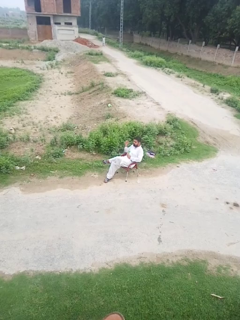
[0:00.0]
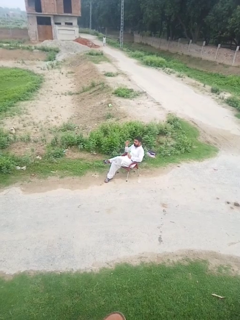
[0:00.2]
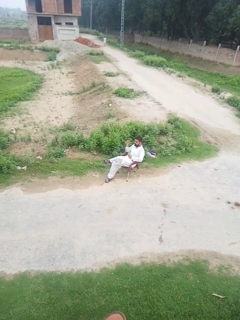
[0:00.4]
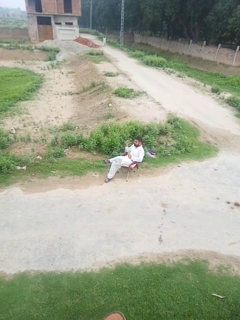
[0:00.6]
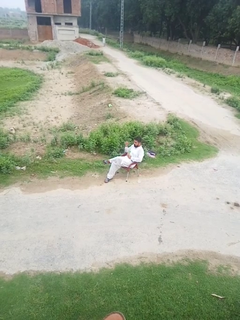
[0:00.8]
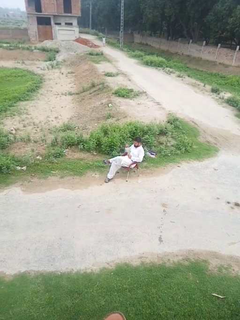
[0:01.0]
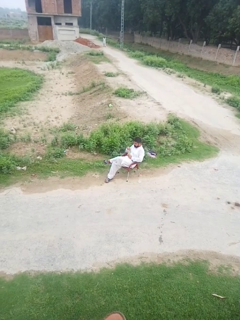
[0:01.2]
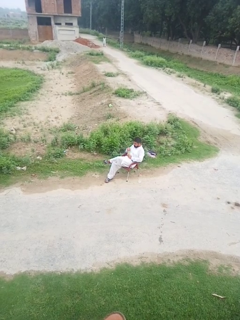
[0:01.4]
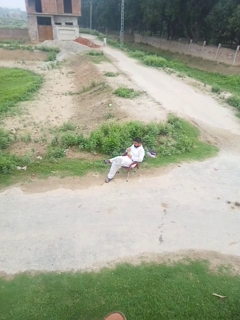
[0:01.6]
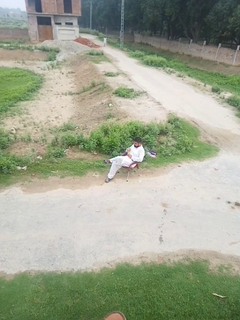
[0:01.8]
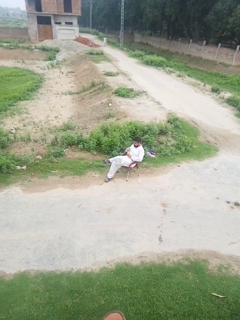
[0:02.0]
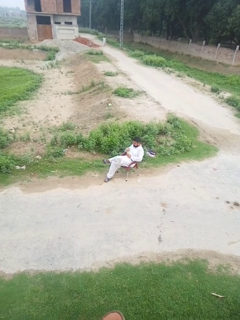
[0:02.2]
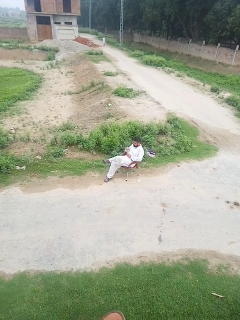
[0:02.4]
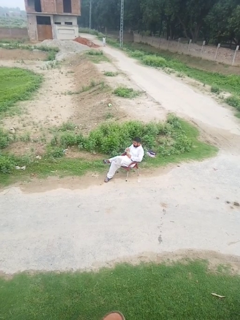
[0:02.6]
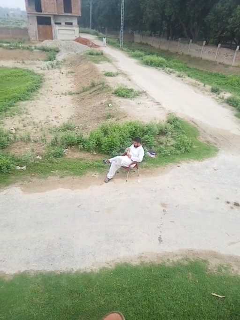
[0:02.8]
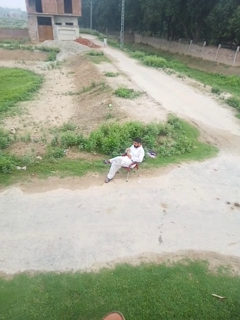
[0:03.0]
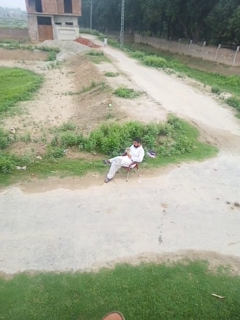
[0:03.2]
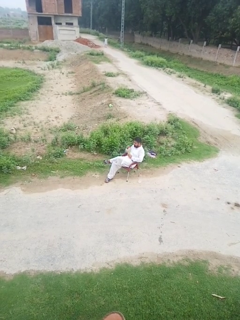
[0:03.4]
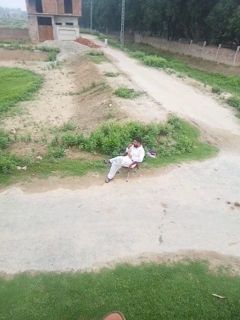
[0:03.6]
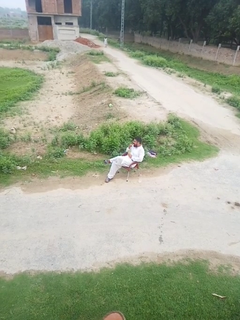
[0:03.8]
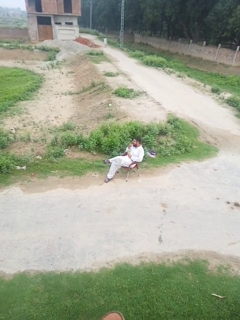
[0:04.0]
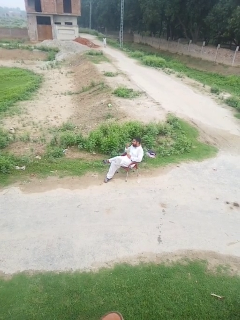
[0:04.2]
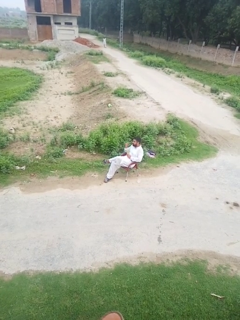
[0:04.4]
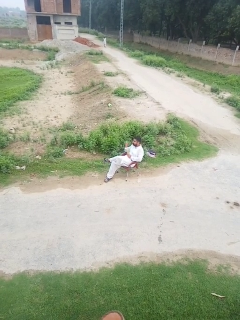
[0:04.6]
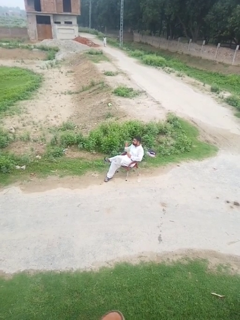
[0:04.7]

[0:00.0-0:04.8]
person eats snack from bag

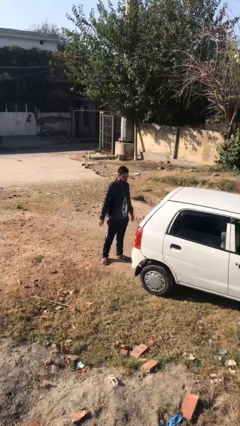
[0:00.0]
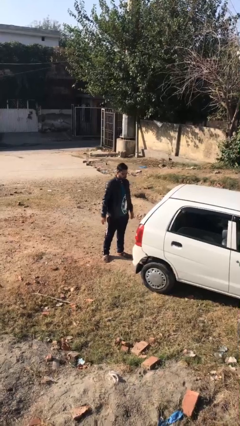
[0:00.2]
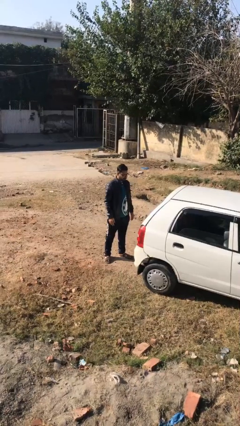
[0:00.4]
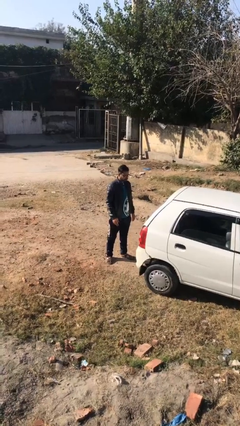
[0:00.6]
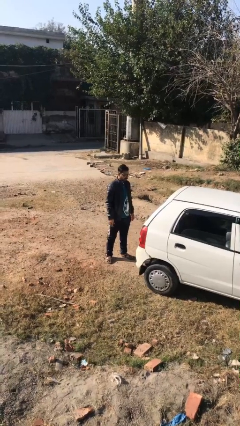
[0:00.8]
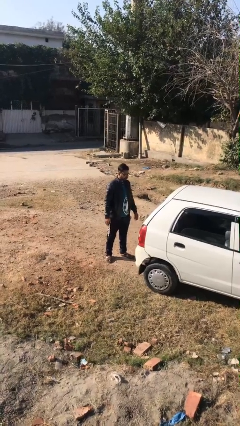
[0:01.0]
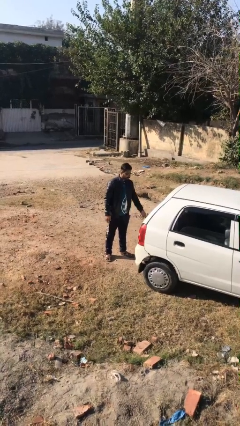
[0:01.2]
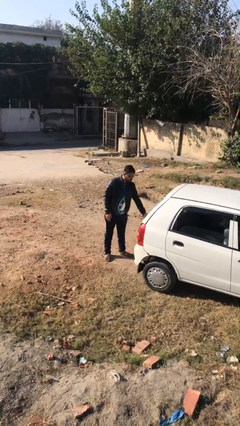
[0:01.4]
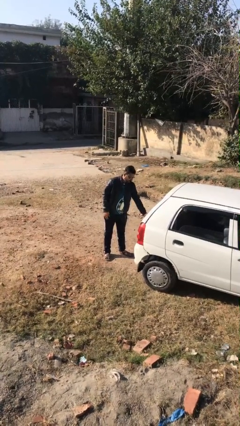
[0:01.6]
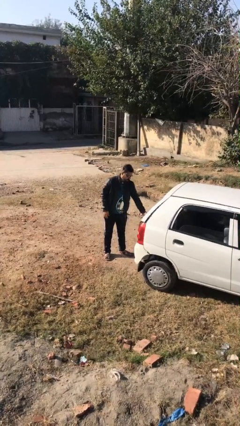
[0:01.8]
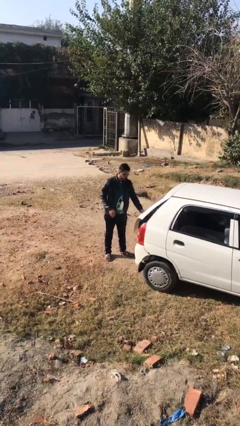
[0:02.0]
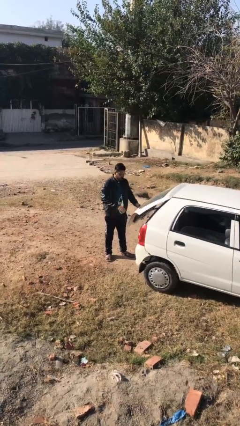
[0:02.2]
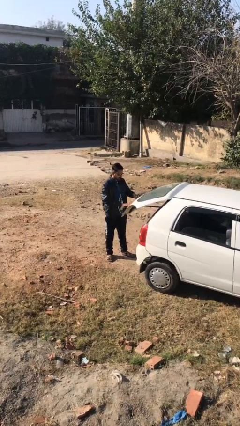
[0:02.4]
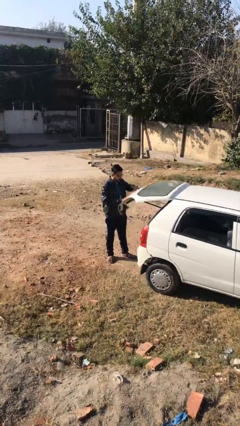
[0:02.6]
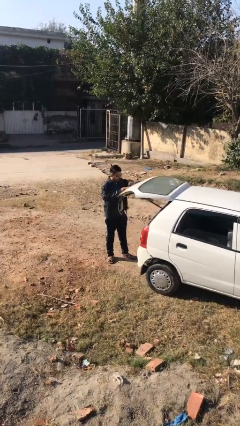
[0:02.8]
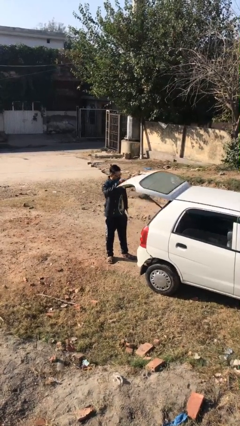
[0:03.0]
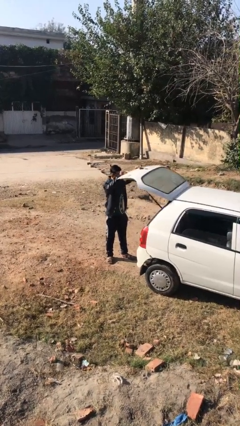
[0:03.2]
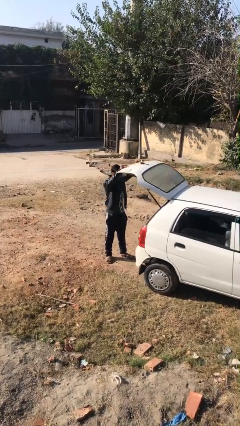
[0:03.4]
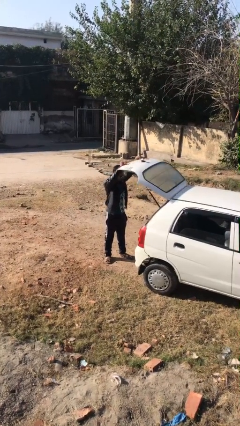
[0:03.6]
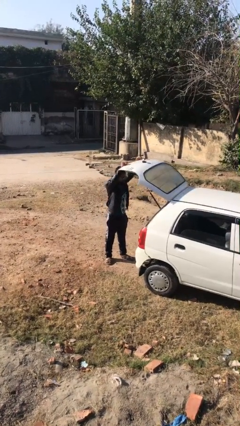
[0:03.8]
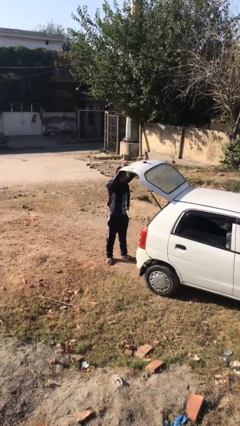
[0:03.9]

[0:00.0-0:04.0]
person opens car trunk

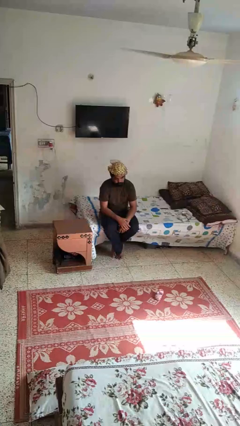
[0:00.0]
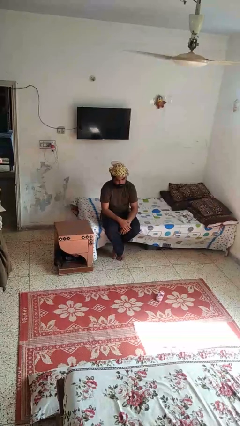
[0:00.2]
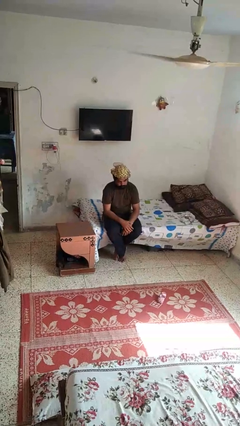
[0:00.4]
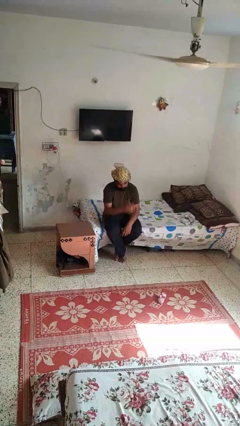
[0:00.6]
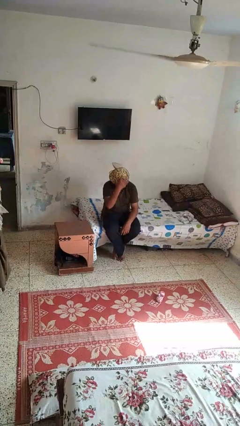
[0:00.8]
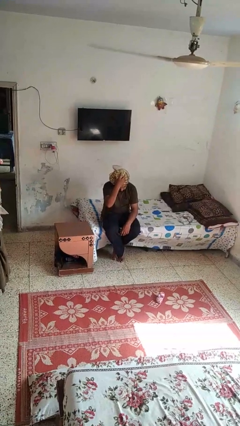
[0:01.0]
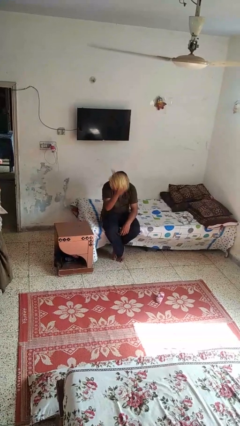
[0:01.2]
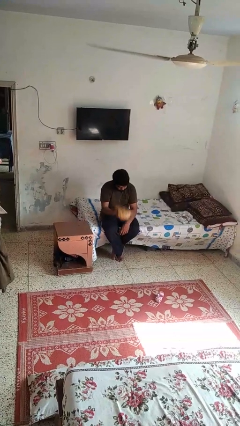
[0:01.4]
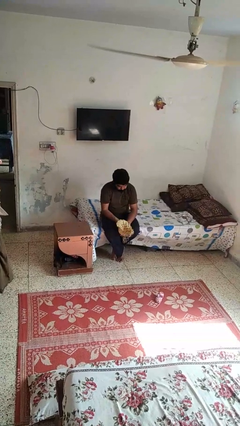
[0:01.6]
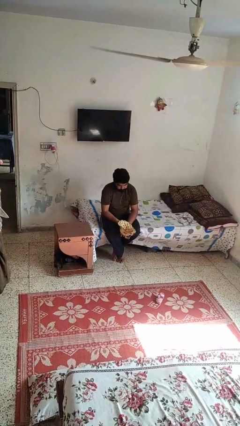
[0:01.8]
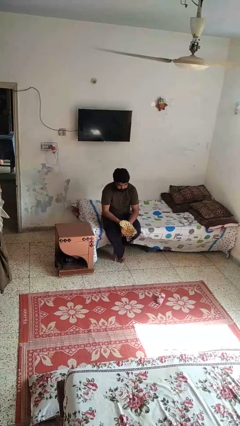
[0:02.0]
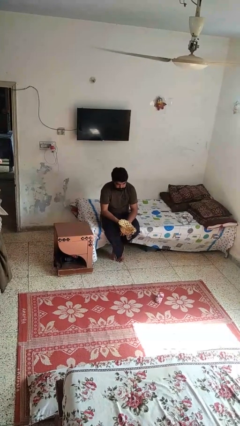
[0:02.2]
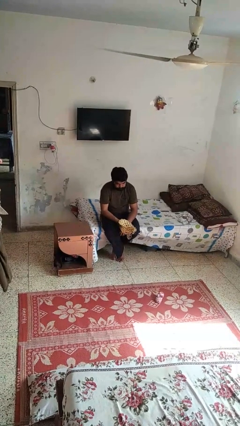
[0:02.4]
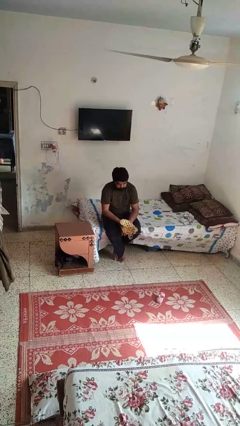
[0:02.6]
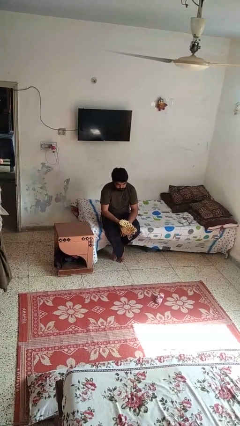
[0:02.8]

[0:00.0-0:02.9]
person takes off hat

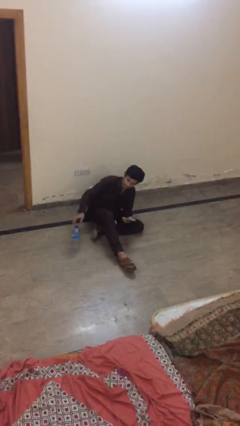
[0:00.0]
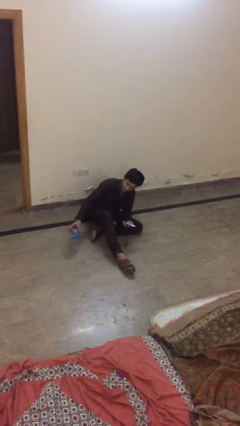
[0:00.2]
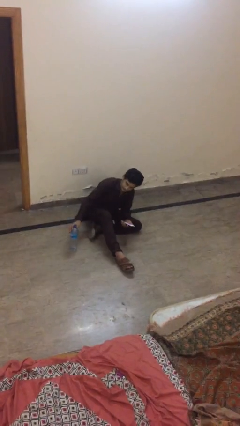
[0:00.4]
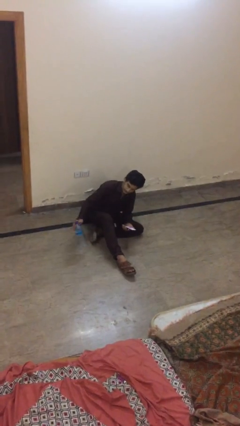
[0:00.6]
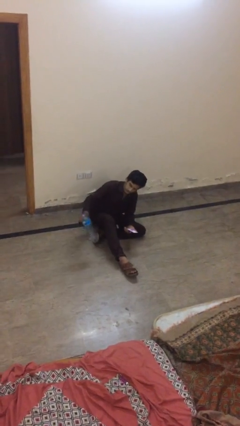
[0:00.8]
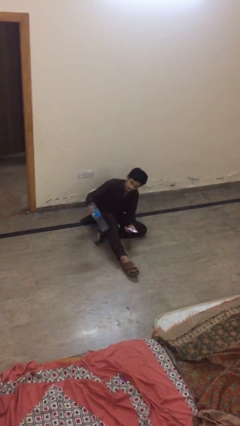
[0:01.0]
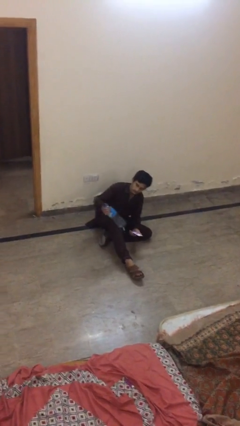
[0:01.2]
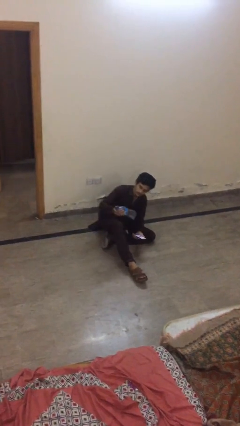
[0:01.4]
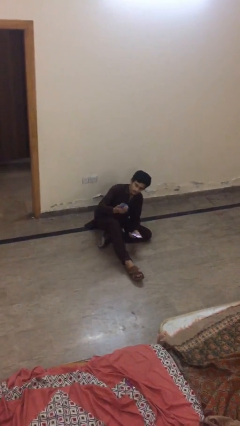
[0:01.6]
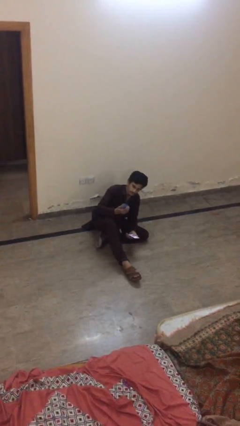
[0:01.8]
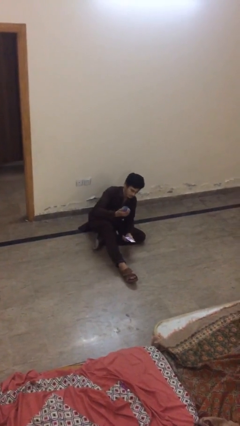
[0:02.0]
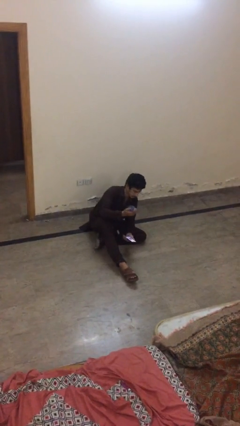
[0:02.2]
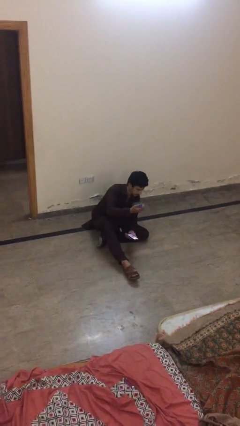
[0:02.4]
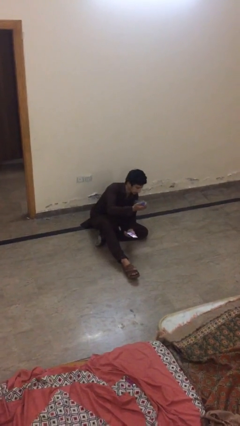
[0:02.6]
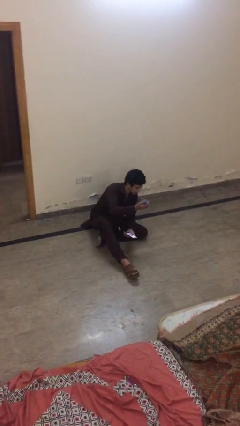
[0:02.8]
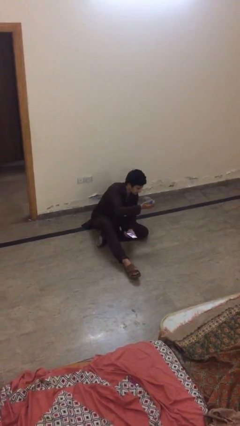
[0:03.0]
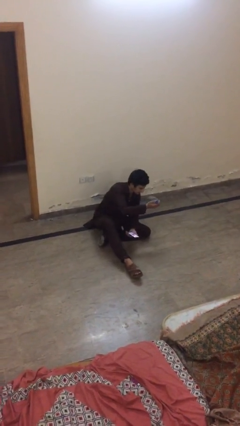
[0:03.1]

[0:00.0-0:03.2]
person picks up object from floor

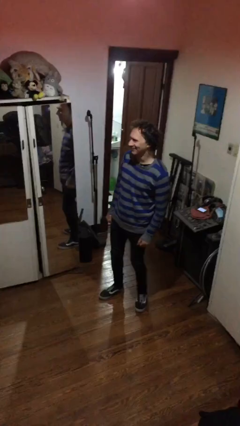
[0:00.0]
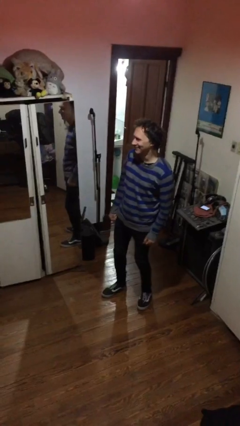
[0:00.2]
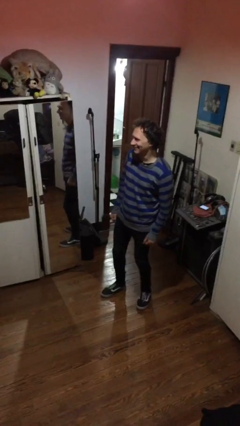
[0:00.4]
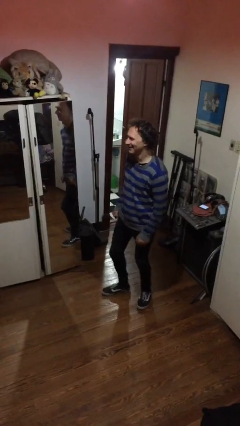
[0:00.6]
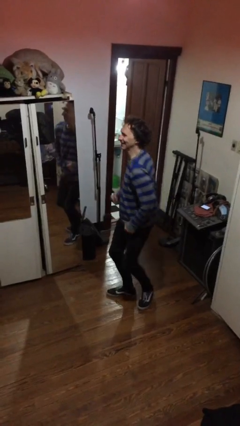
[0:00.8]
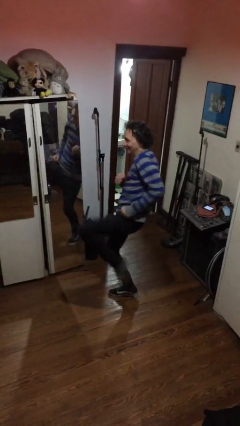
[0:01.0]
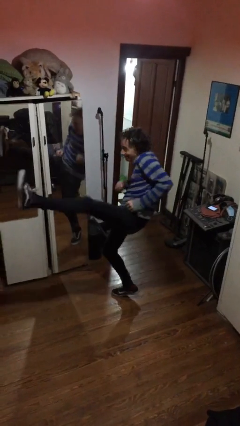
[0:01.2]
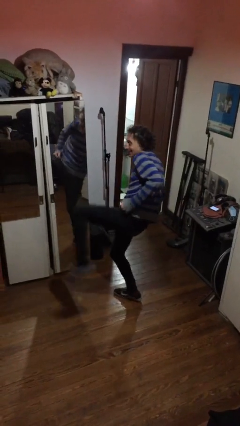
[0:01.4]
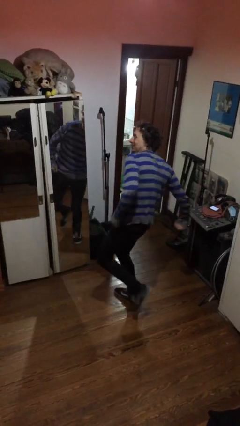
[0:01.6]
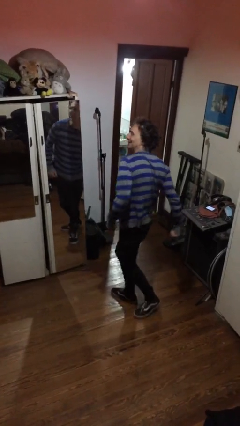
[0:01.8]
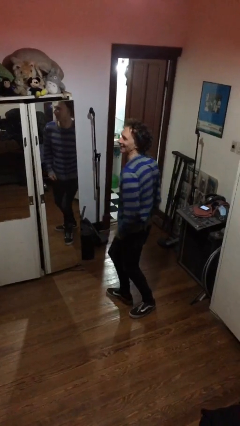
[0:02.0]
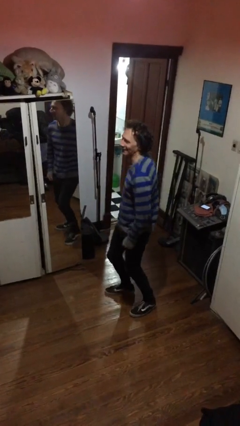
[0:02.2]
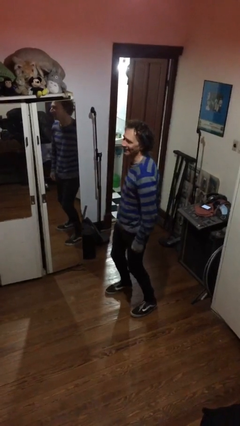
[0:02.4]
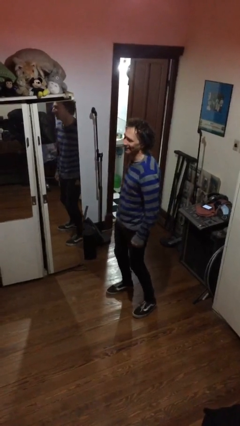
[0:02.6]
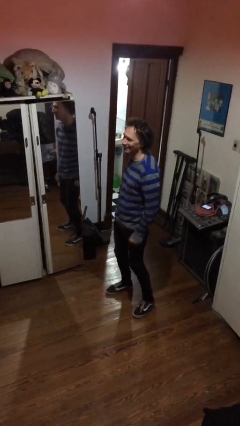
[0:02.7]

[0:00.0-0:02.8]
person karate kicks

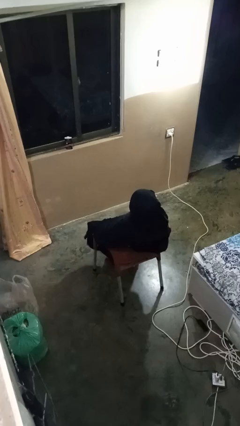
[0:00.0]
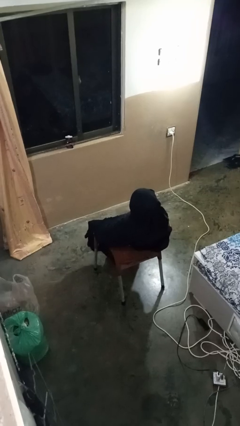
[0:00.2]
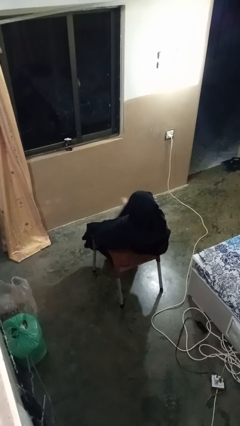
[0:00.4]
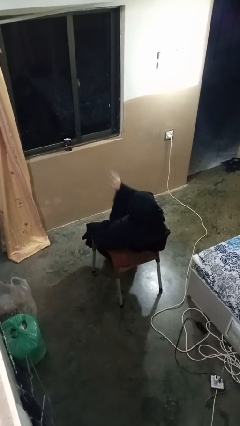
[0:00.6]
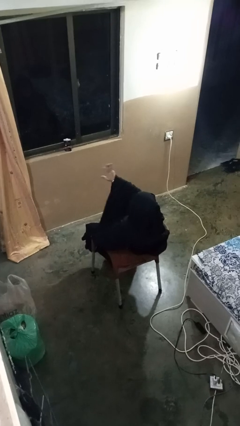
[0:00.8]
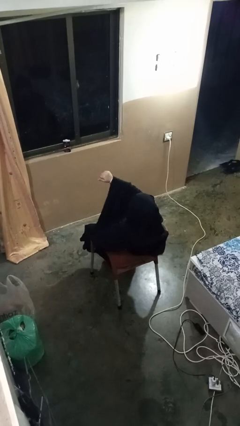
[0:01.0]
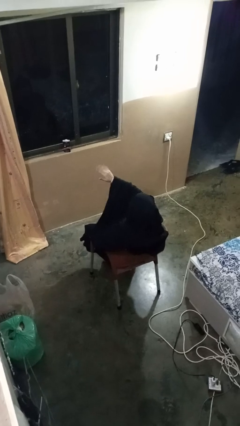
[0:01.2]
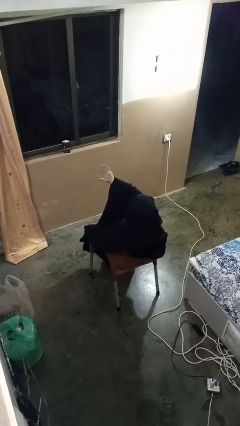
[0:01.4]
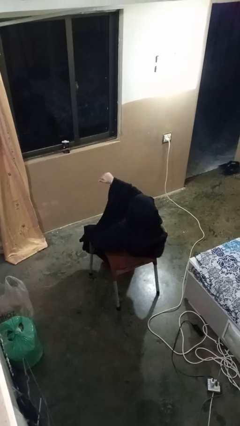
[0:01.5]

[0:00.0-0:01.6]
person gestures come here
